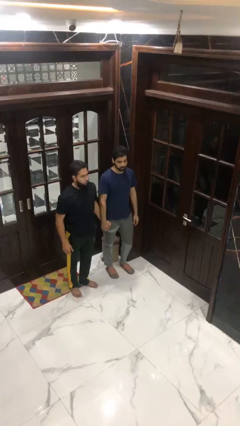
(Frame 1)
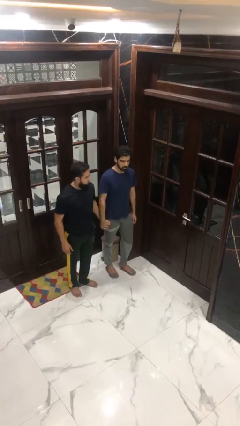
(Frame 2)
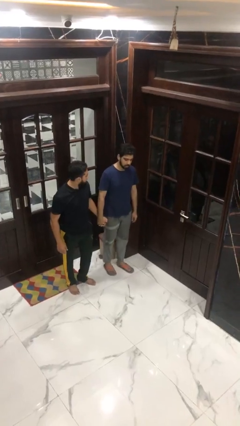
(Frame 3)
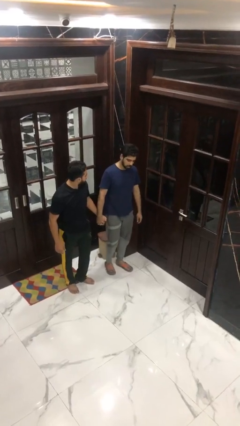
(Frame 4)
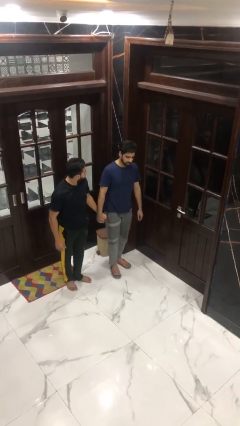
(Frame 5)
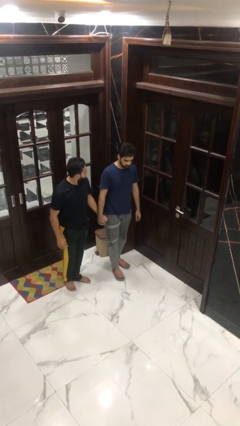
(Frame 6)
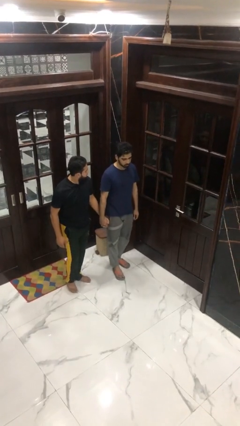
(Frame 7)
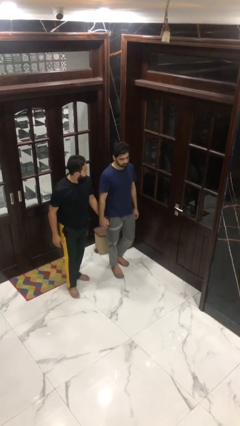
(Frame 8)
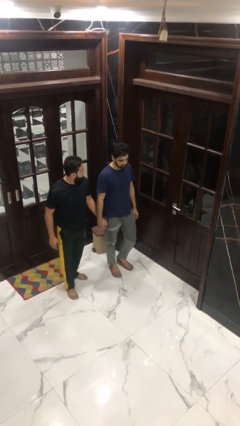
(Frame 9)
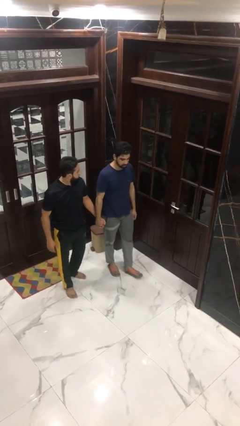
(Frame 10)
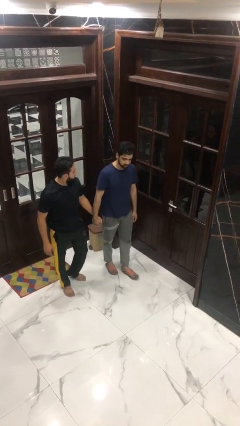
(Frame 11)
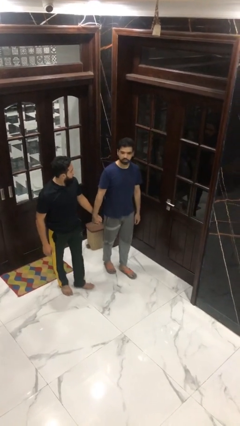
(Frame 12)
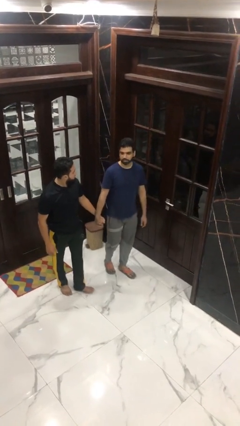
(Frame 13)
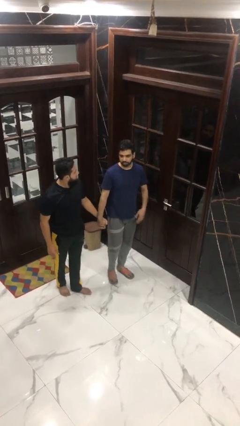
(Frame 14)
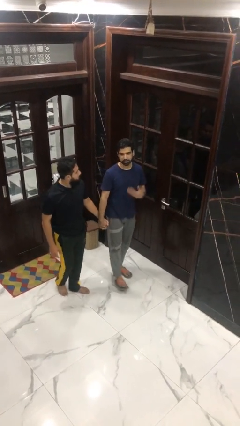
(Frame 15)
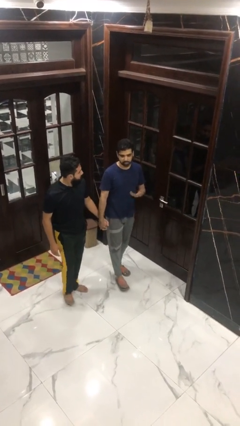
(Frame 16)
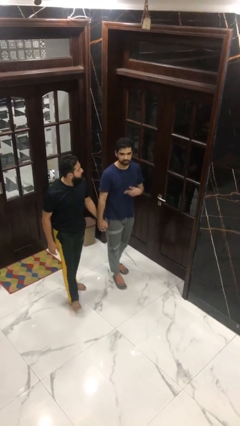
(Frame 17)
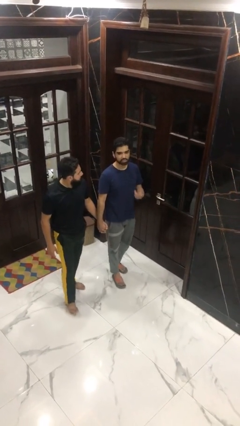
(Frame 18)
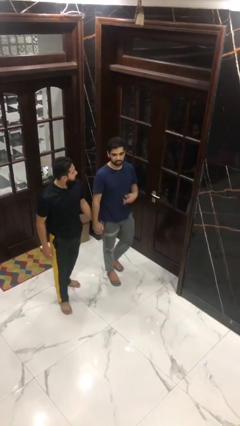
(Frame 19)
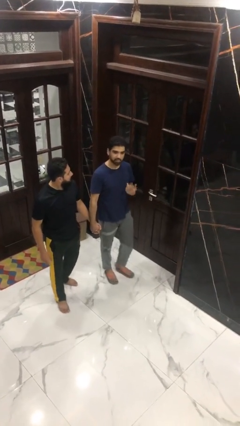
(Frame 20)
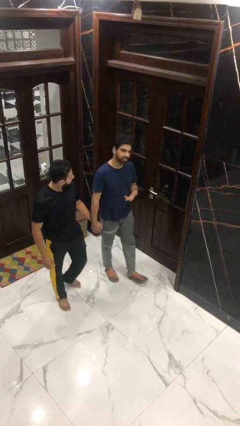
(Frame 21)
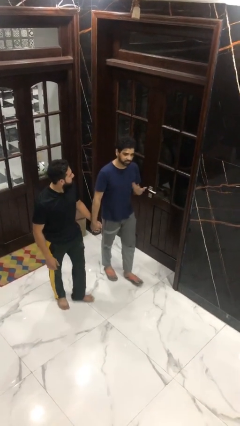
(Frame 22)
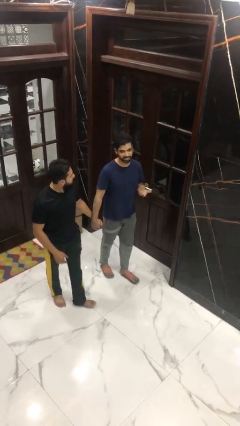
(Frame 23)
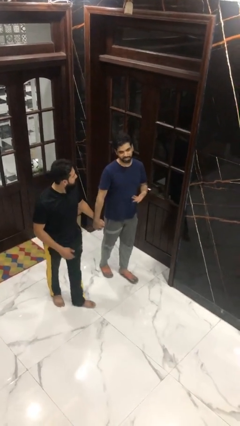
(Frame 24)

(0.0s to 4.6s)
person holds hand

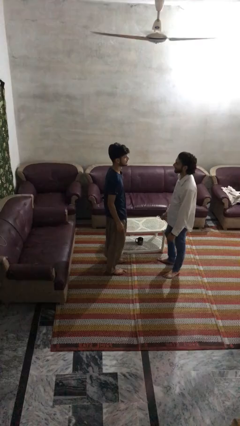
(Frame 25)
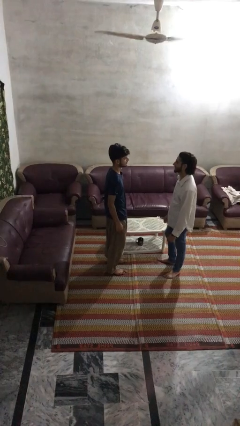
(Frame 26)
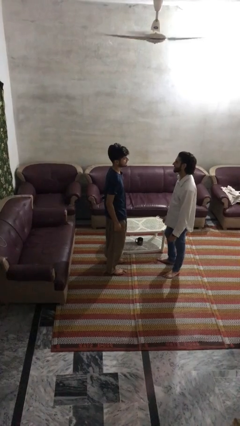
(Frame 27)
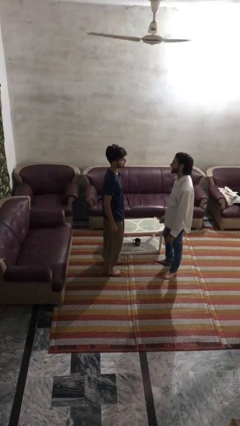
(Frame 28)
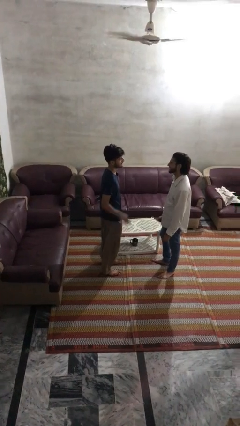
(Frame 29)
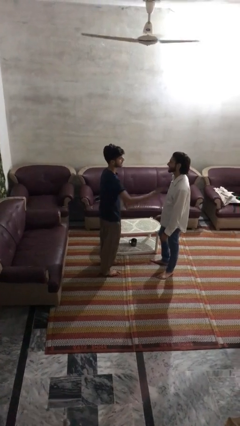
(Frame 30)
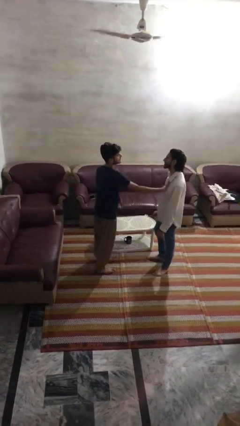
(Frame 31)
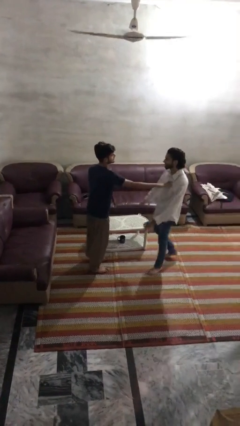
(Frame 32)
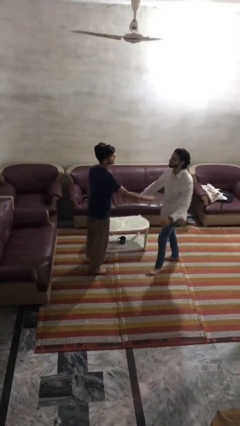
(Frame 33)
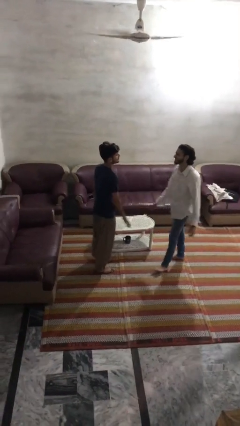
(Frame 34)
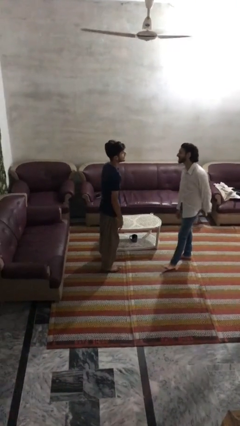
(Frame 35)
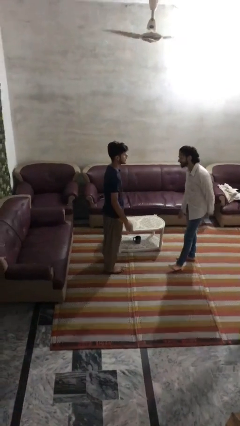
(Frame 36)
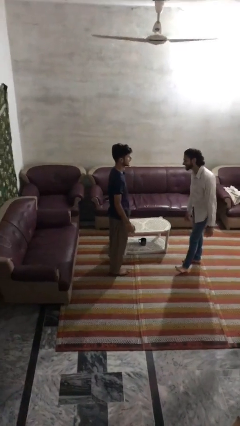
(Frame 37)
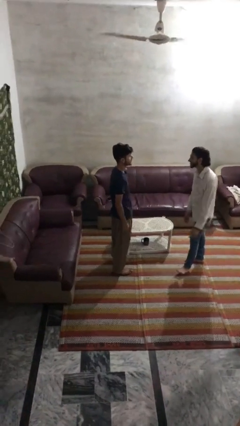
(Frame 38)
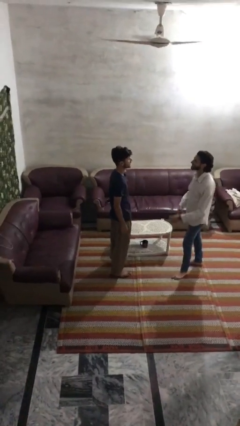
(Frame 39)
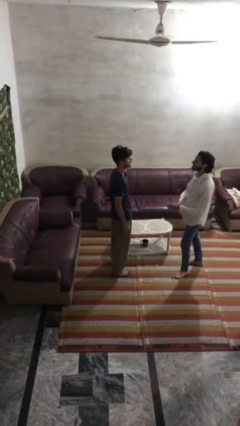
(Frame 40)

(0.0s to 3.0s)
person shoves person

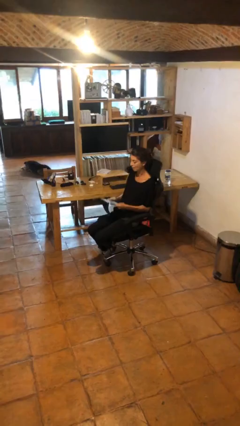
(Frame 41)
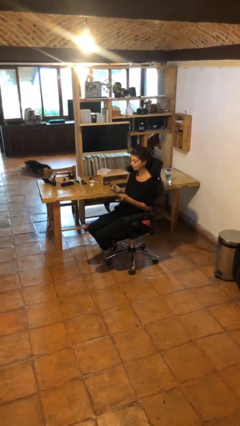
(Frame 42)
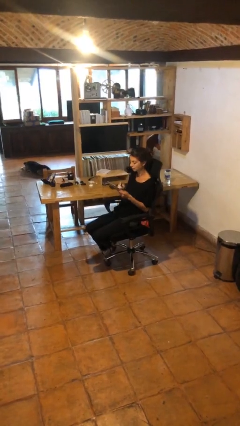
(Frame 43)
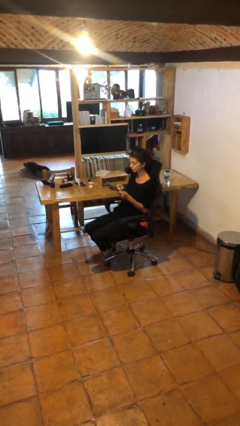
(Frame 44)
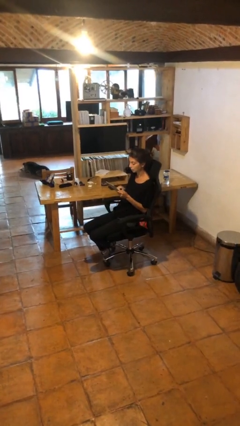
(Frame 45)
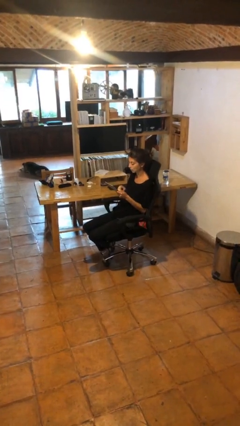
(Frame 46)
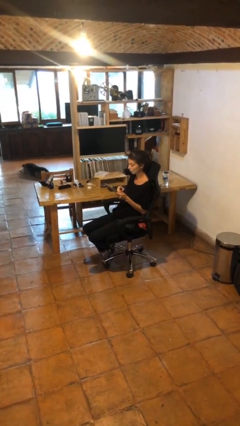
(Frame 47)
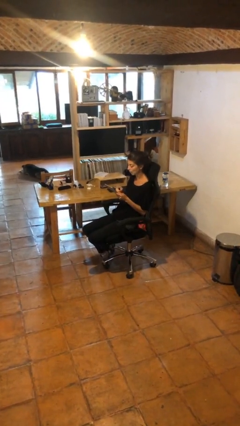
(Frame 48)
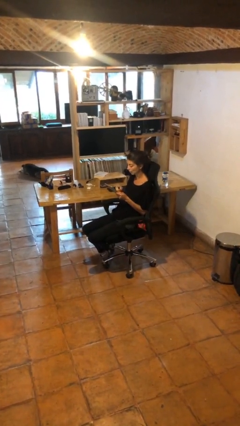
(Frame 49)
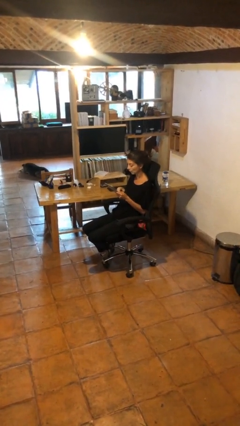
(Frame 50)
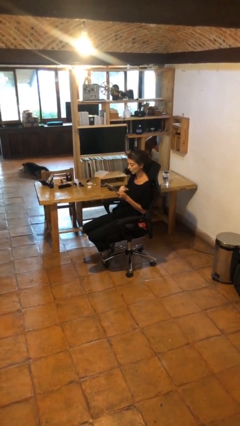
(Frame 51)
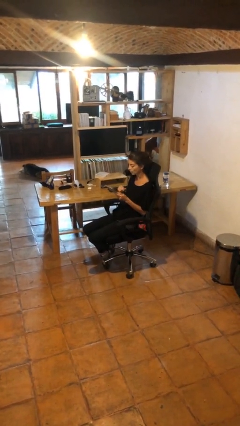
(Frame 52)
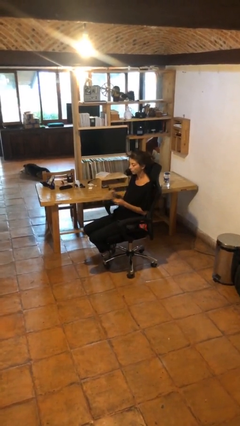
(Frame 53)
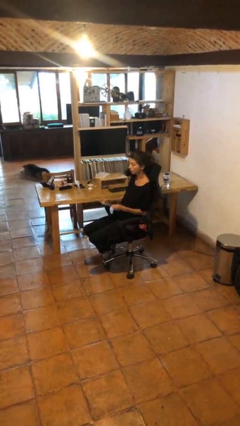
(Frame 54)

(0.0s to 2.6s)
person interacts with tablet

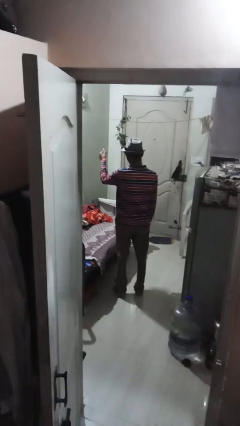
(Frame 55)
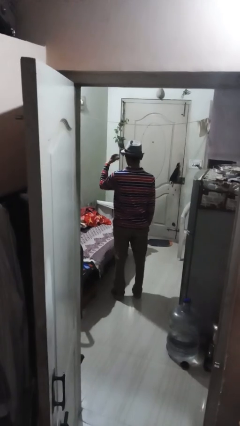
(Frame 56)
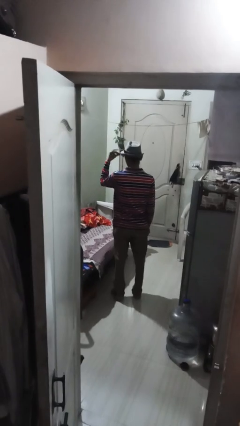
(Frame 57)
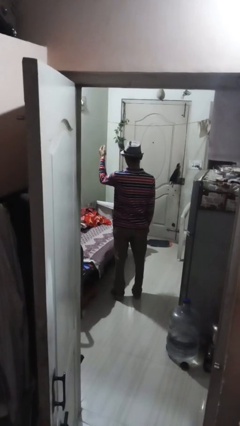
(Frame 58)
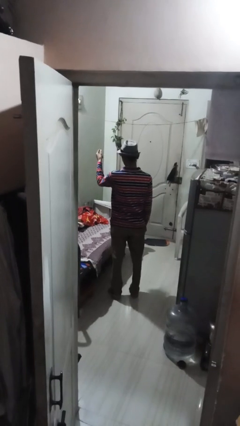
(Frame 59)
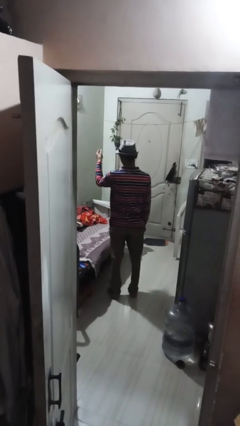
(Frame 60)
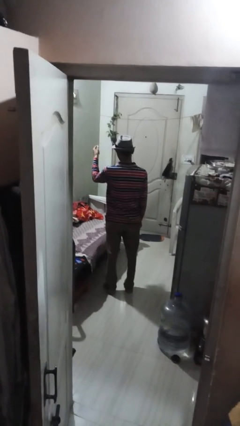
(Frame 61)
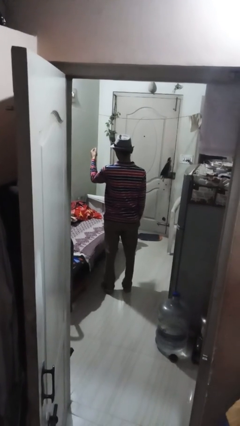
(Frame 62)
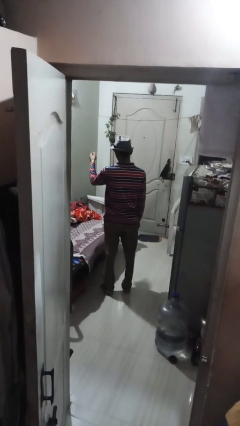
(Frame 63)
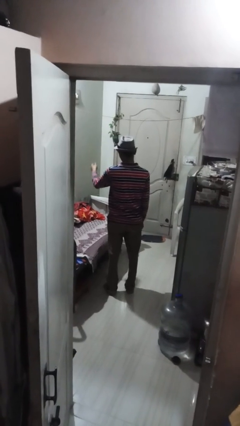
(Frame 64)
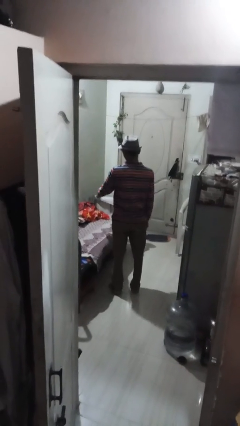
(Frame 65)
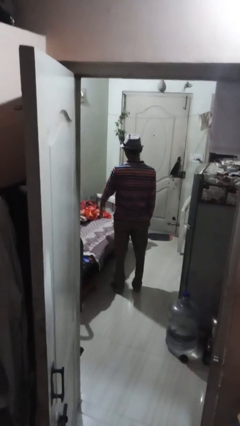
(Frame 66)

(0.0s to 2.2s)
person snaps fingers

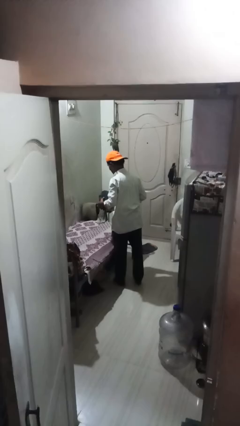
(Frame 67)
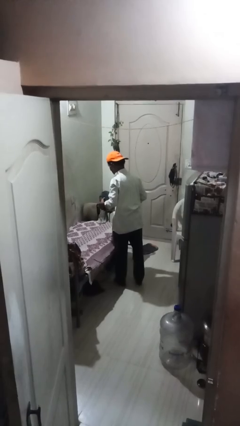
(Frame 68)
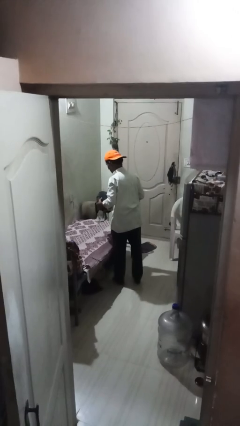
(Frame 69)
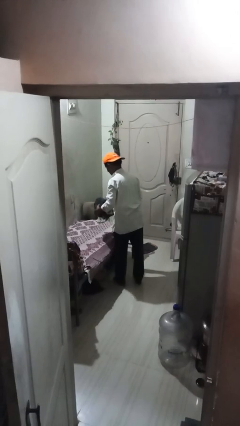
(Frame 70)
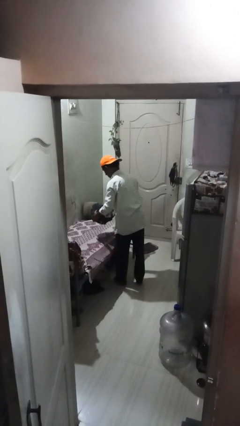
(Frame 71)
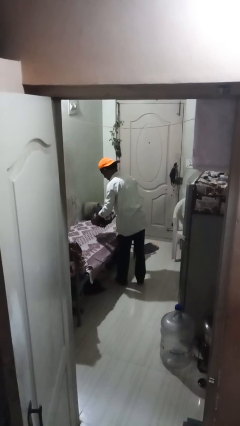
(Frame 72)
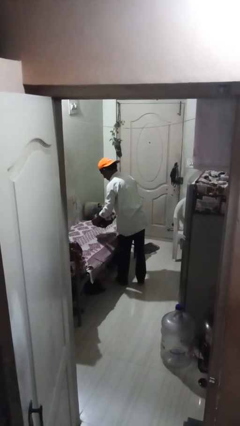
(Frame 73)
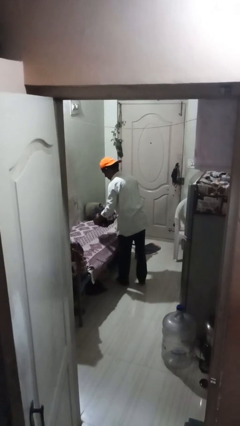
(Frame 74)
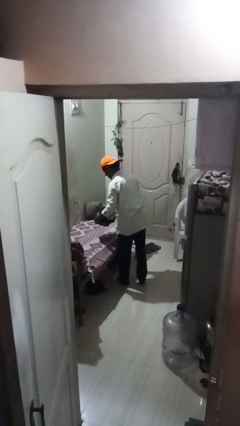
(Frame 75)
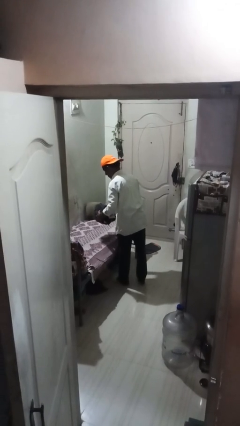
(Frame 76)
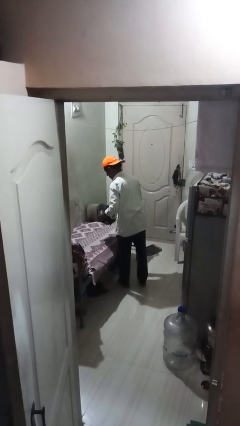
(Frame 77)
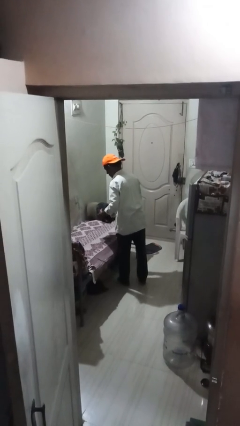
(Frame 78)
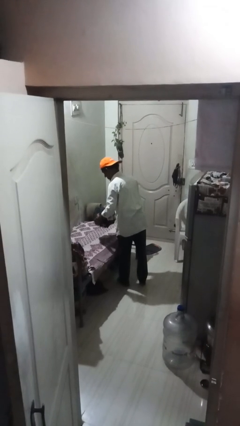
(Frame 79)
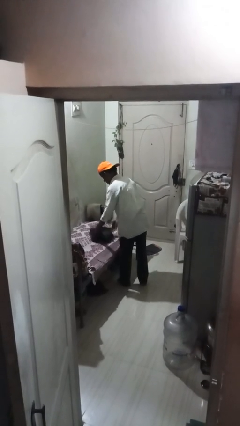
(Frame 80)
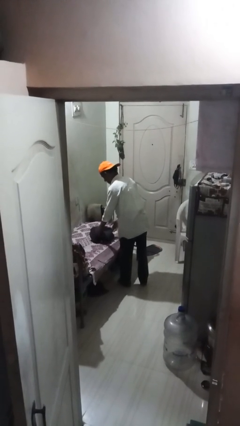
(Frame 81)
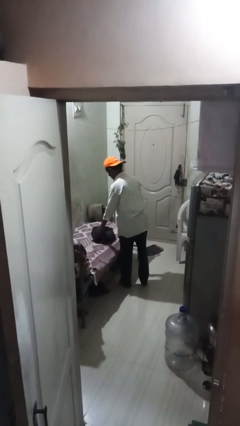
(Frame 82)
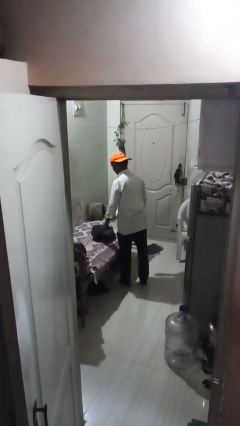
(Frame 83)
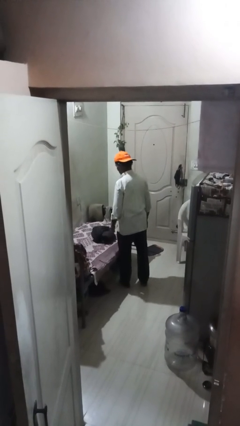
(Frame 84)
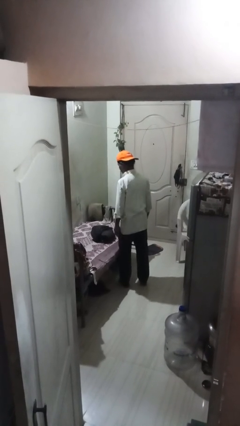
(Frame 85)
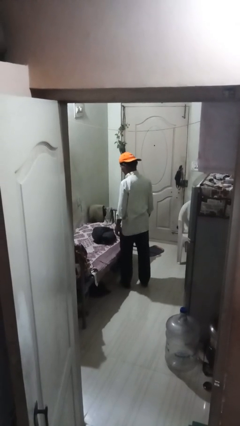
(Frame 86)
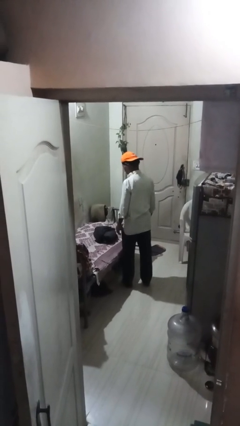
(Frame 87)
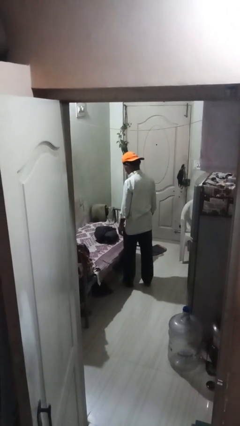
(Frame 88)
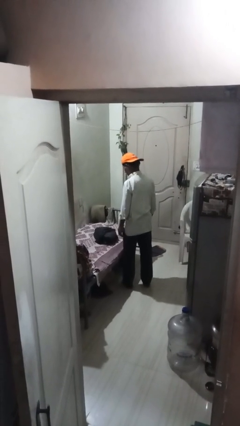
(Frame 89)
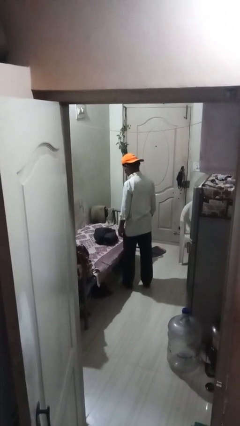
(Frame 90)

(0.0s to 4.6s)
person puts down object on bed
